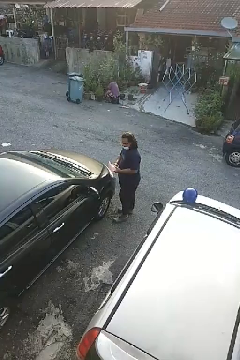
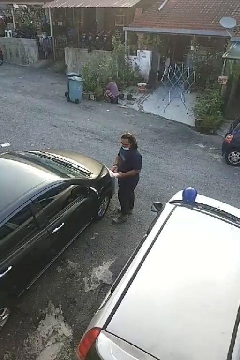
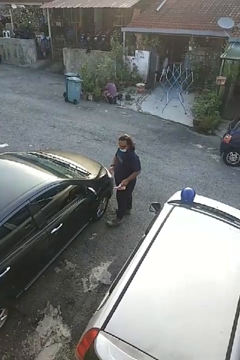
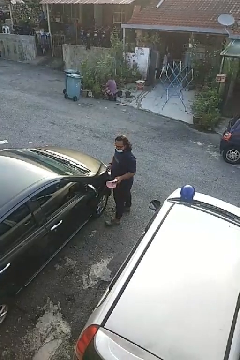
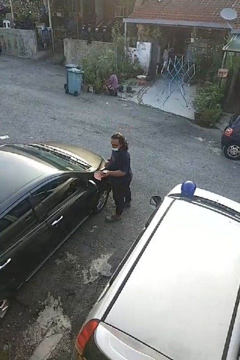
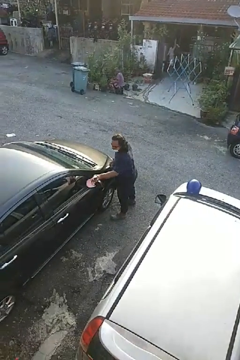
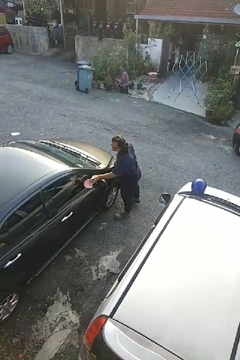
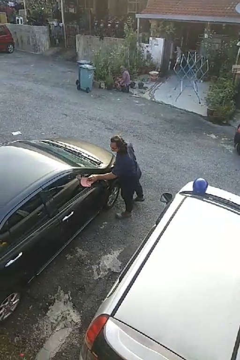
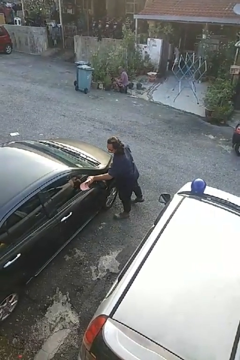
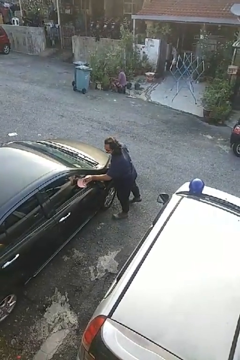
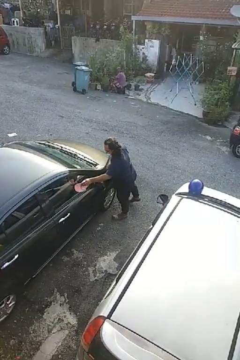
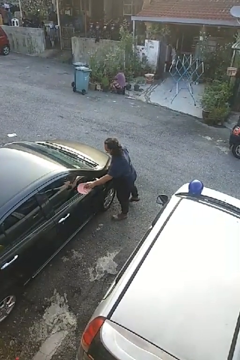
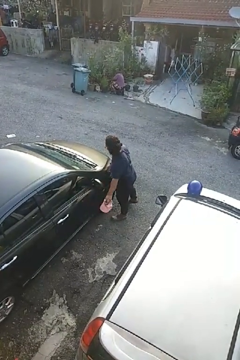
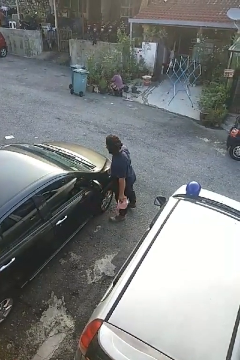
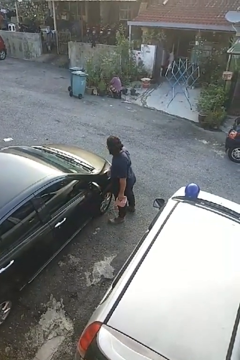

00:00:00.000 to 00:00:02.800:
person polishes car with rag

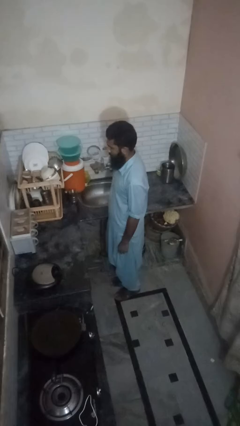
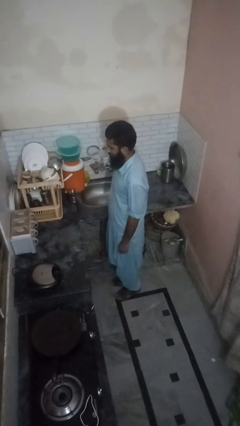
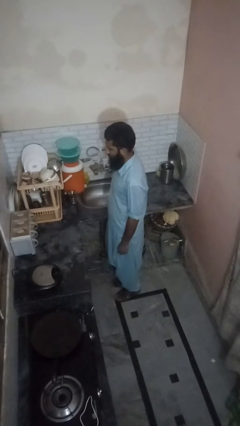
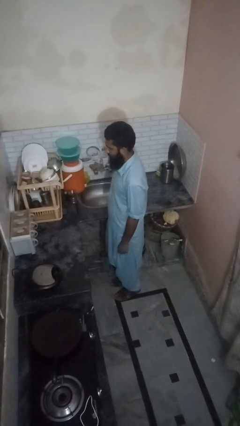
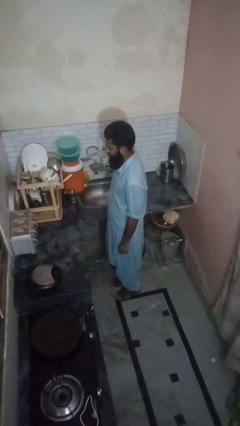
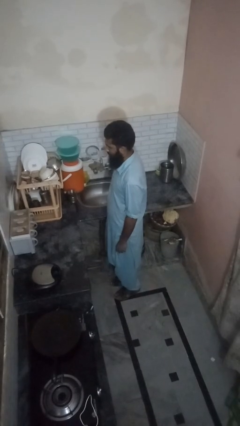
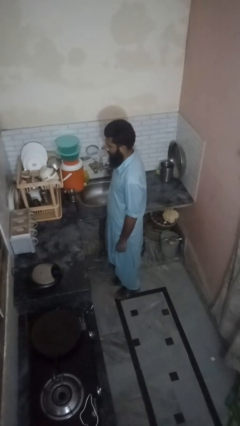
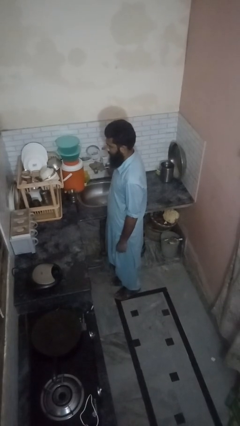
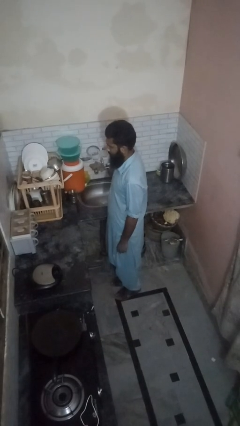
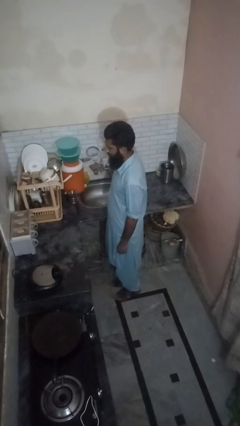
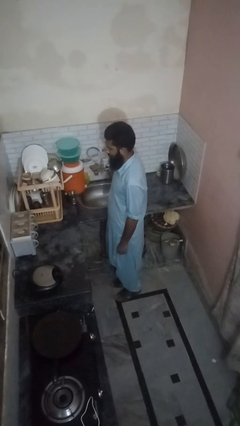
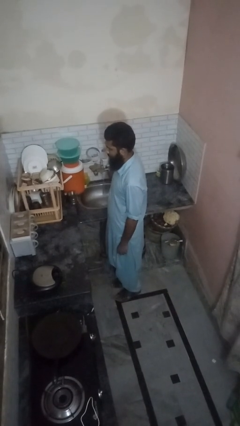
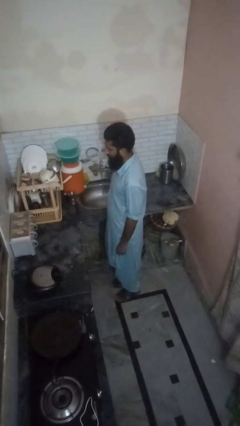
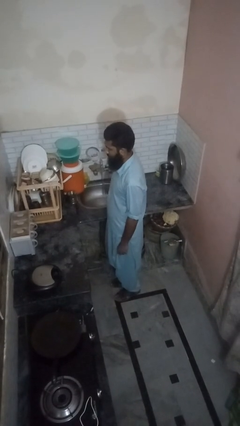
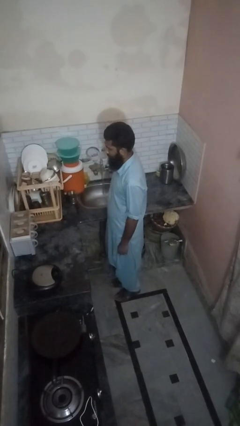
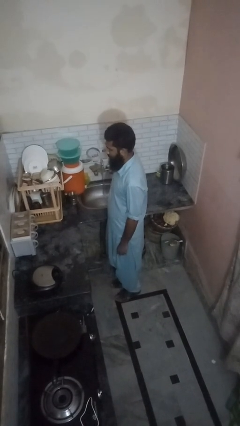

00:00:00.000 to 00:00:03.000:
person turns on faucet

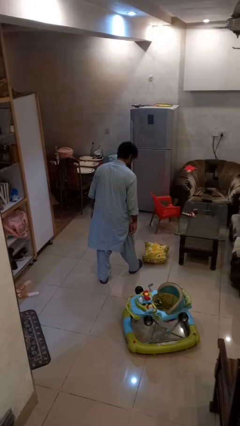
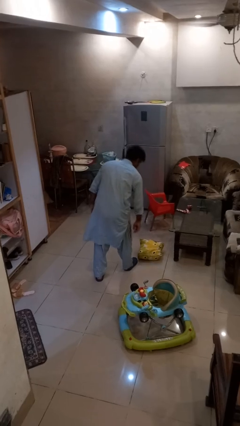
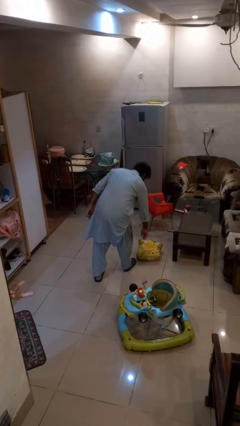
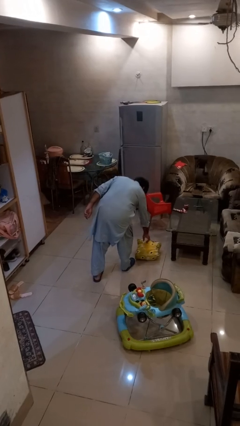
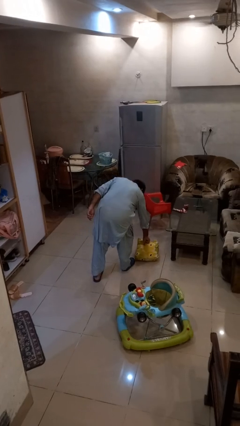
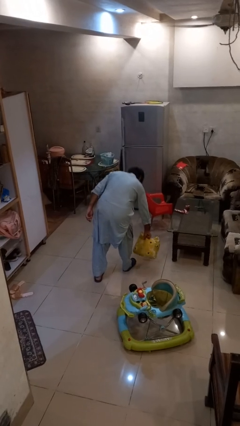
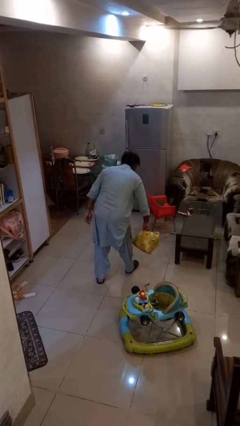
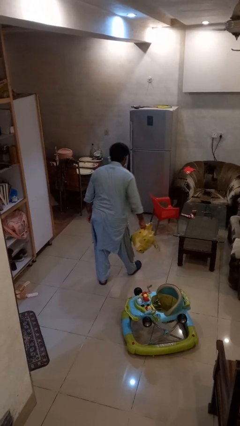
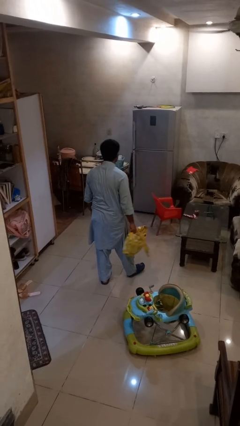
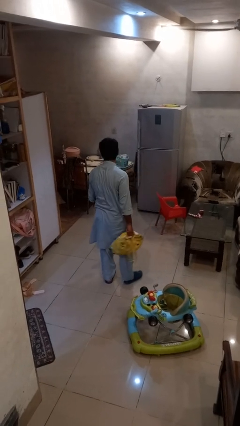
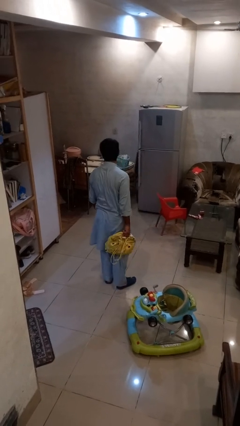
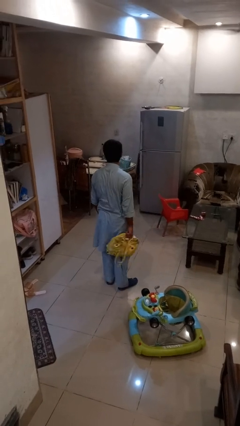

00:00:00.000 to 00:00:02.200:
person picks up object from floor

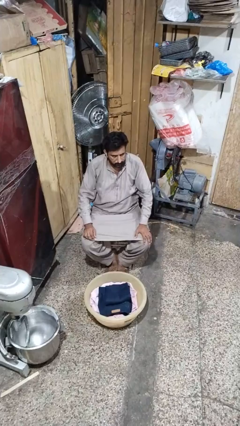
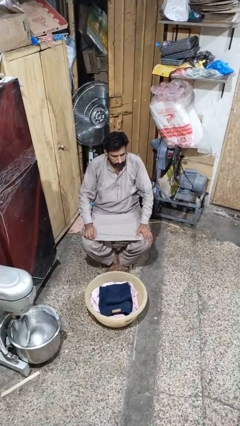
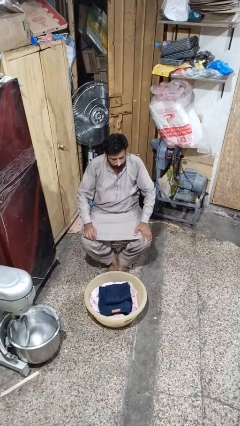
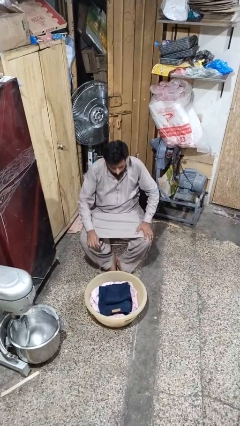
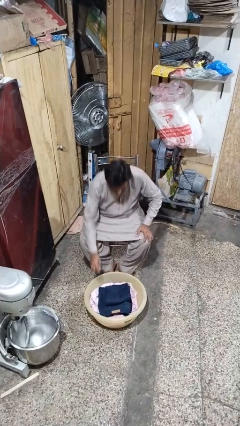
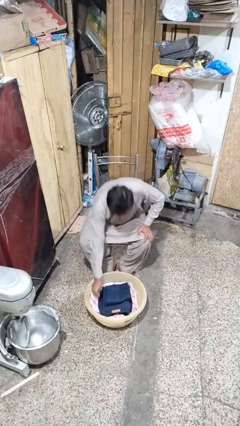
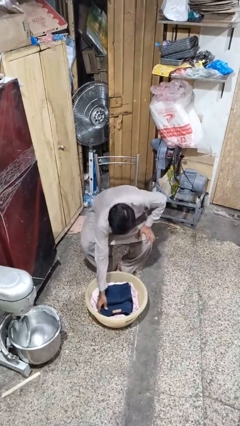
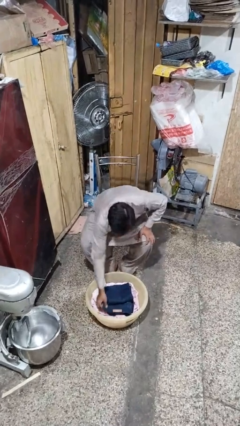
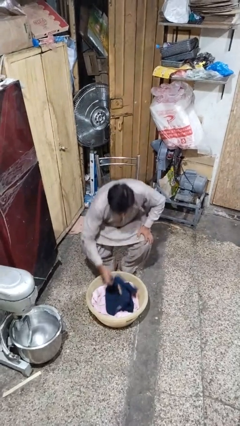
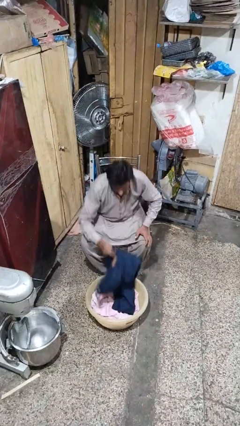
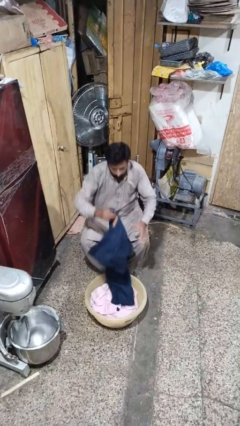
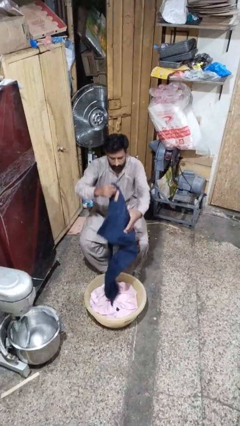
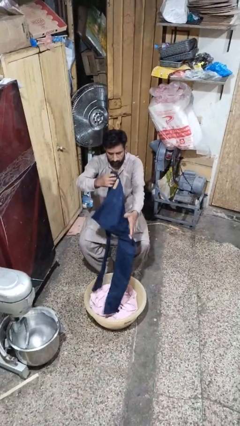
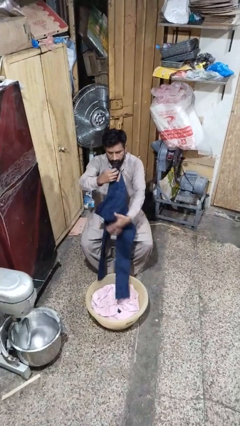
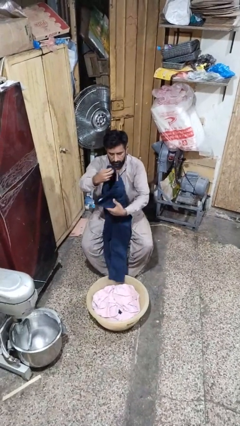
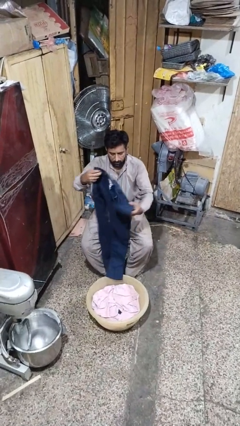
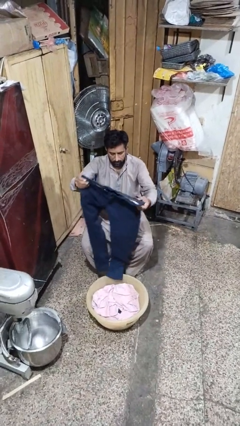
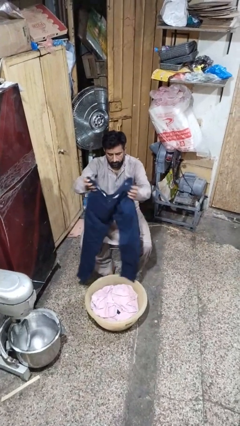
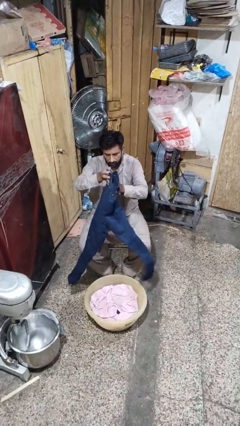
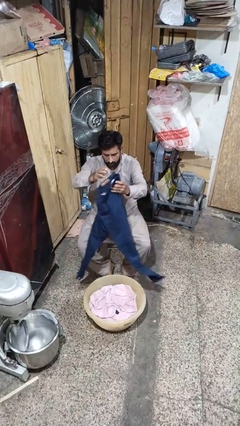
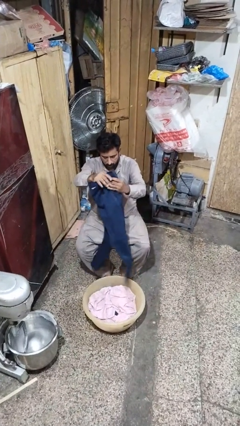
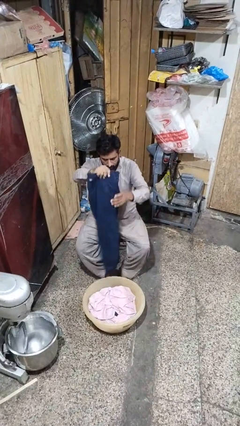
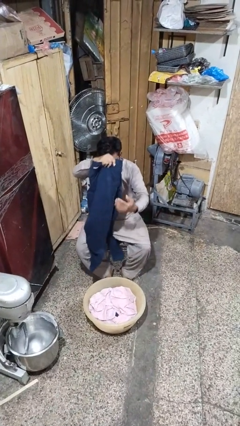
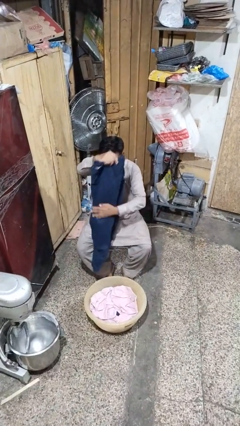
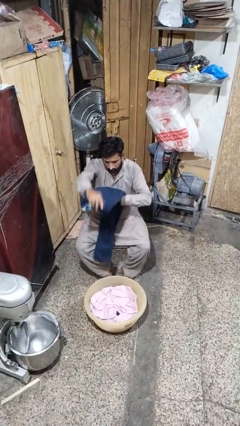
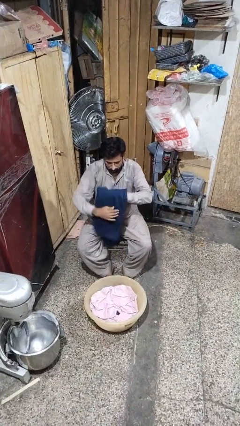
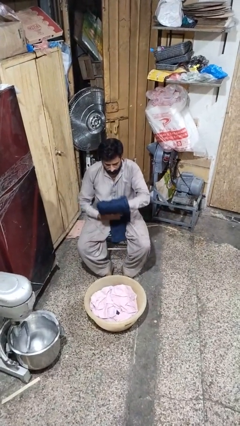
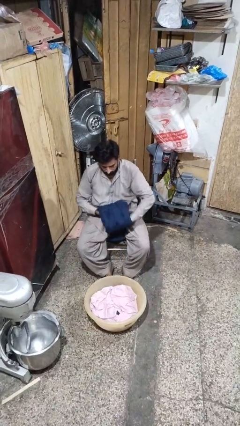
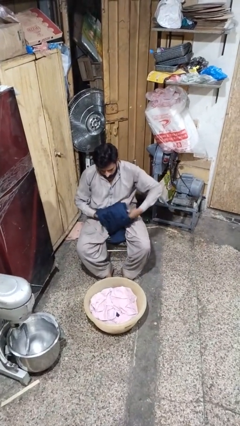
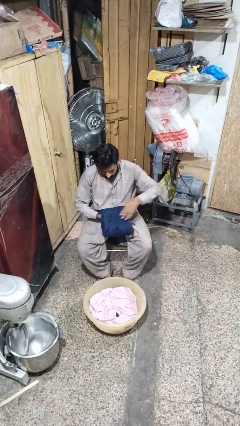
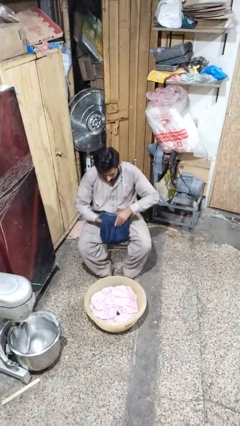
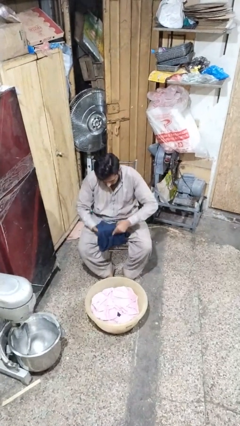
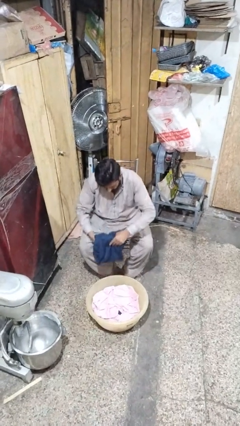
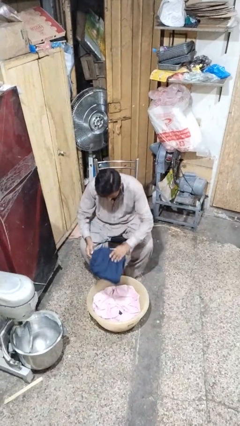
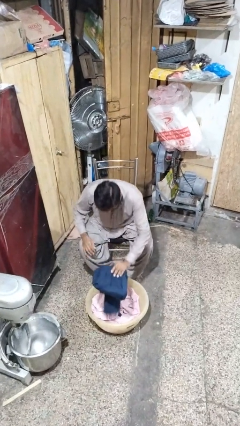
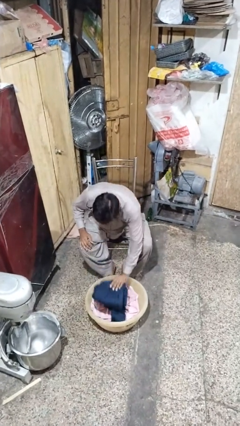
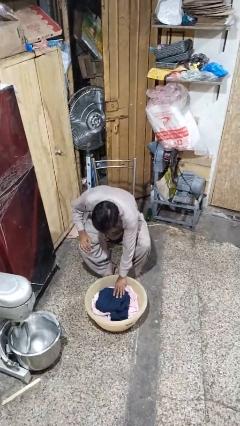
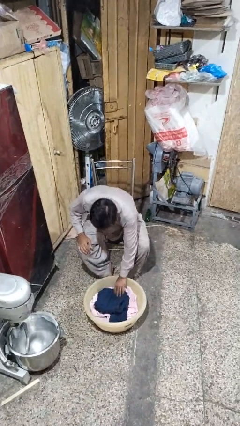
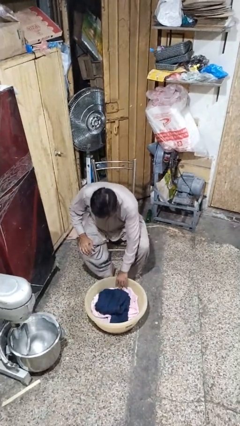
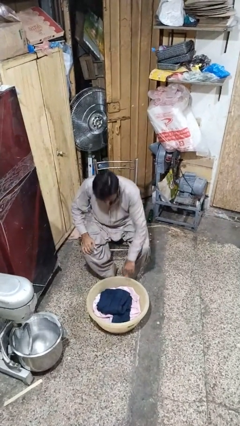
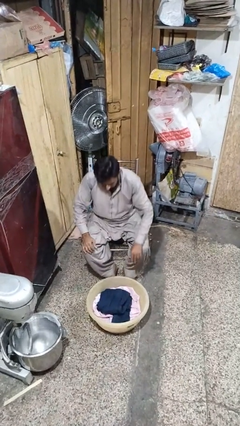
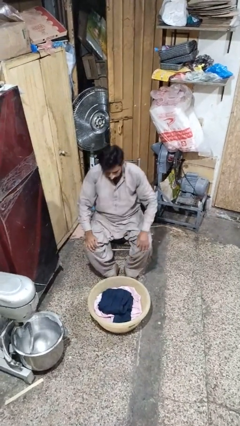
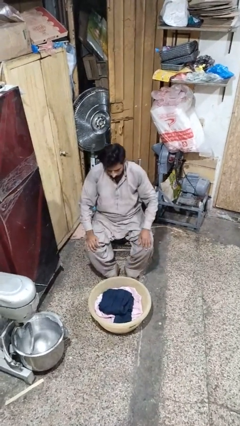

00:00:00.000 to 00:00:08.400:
person folds pants

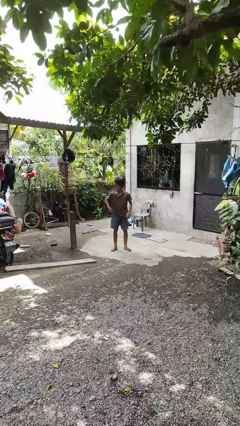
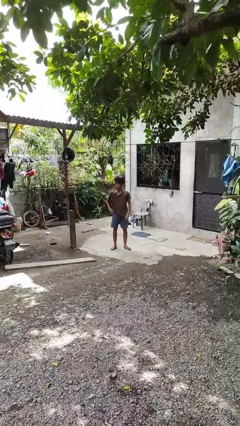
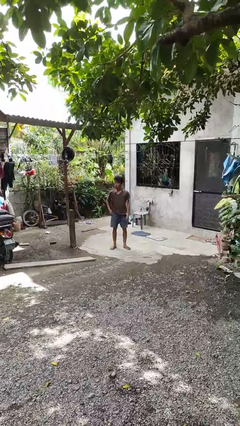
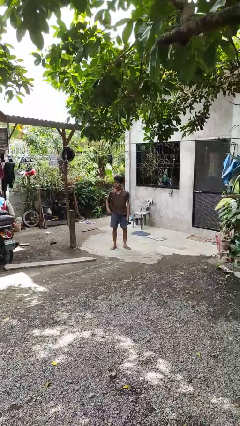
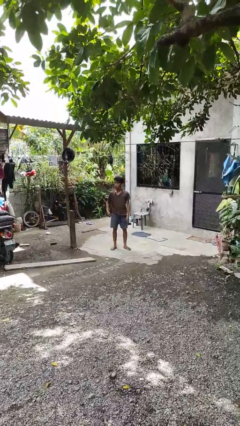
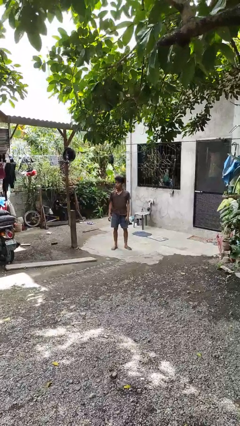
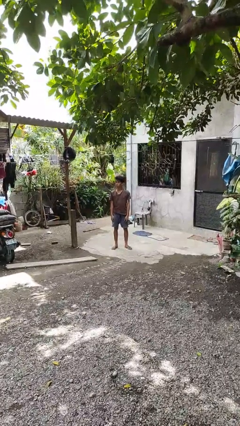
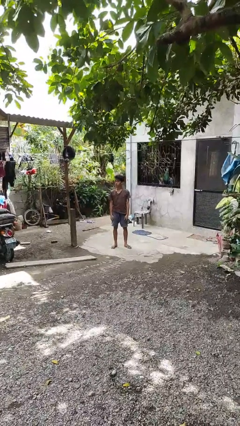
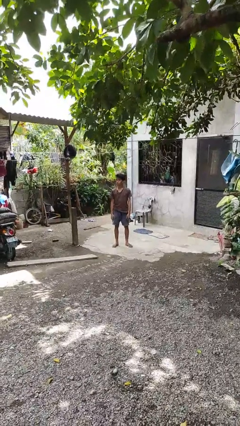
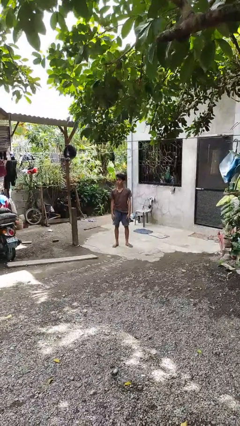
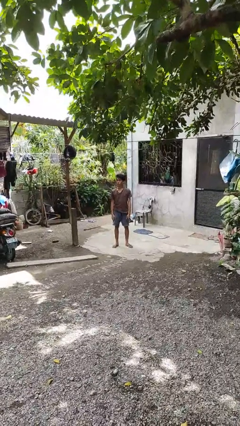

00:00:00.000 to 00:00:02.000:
person puts phone into pocket
